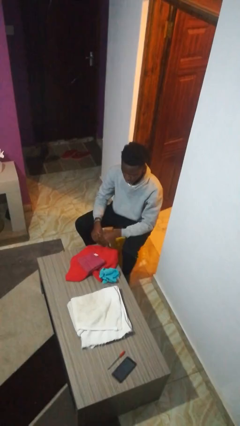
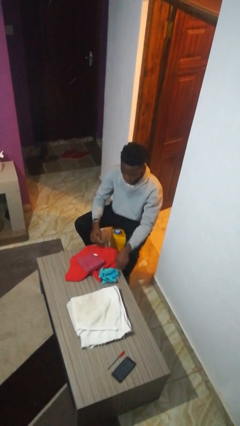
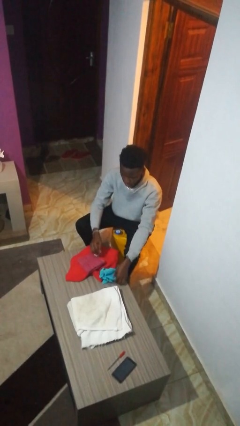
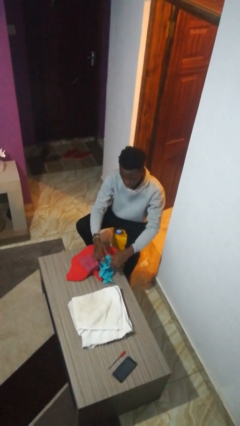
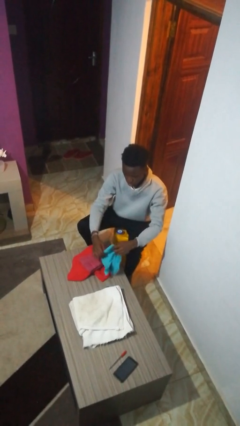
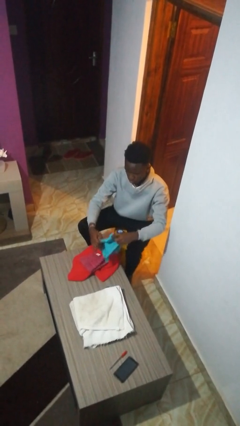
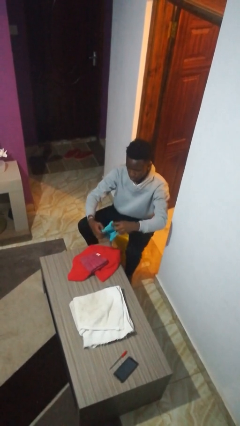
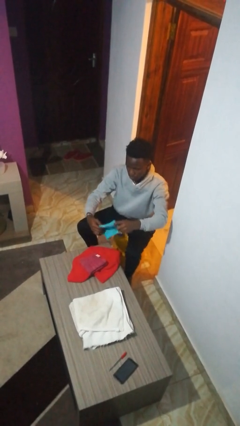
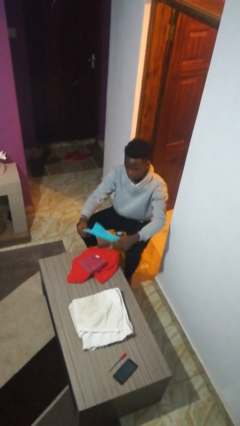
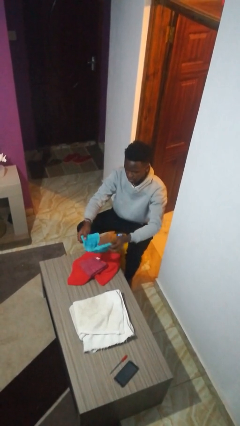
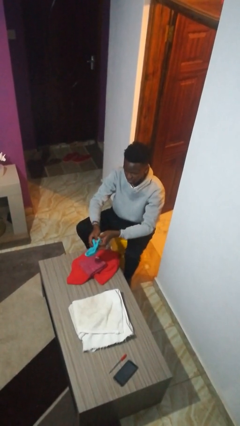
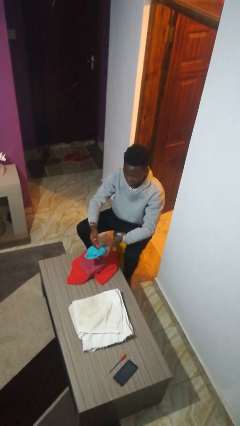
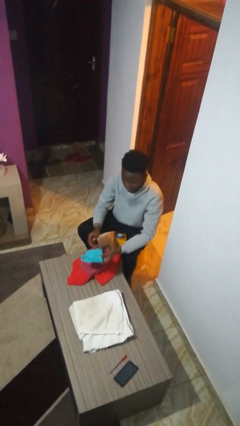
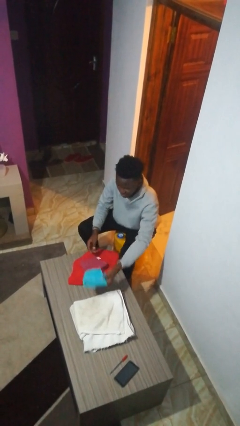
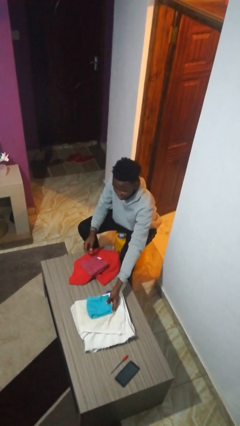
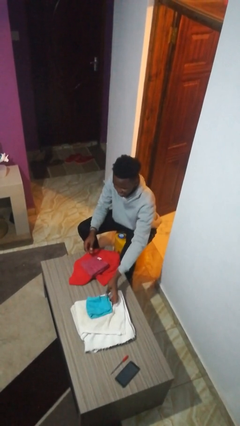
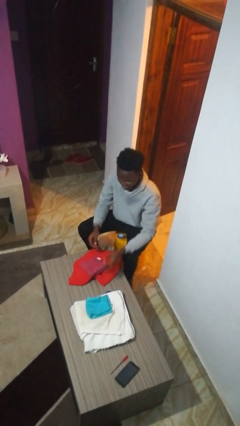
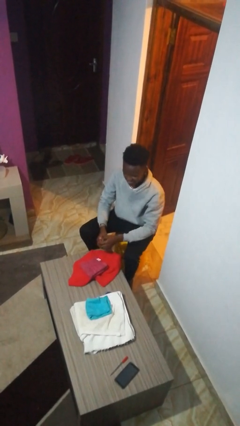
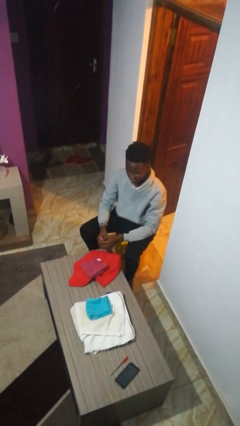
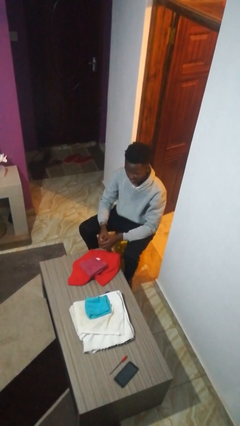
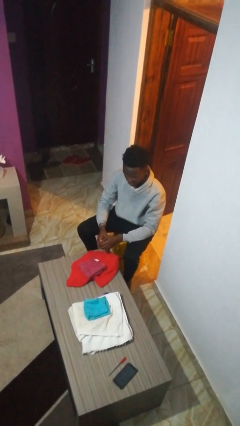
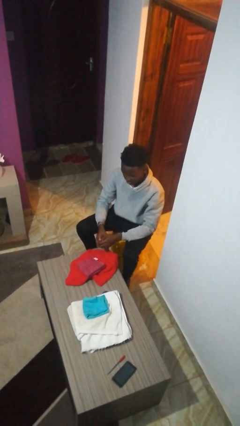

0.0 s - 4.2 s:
person folds towel

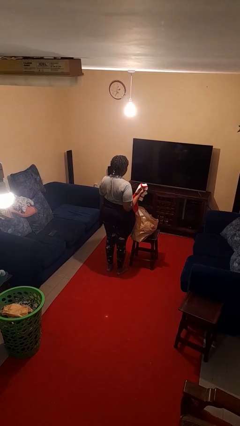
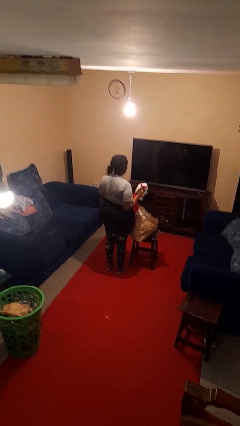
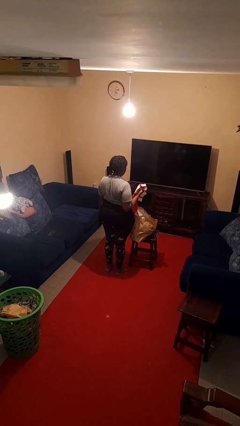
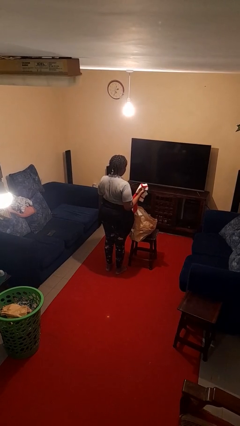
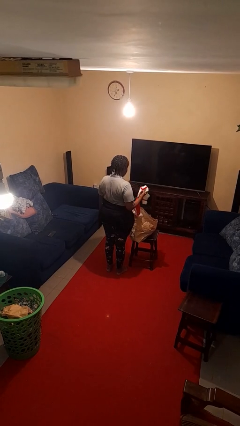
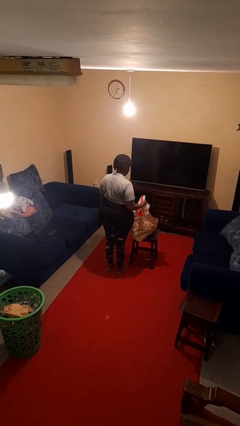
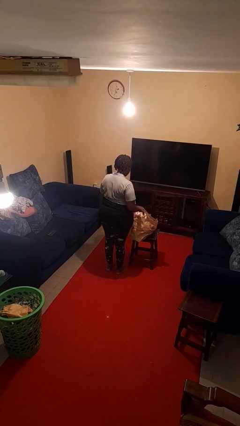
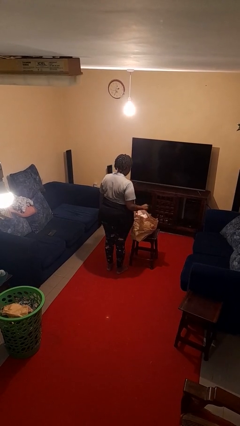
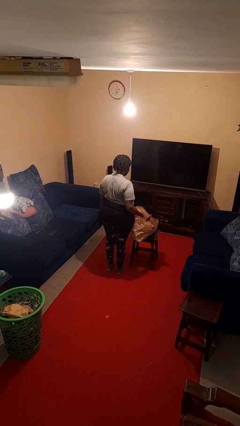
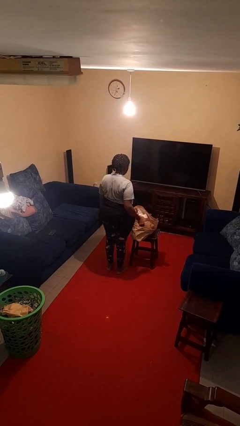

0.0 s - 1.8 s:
person puts object into bag

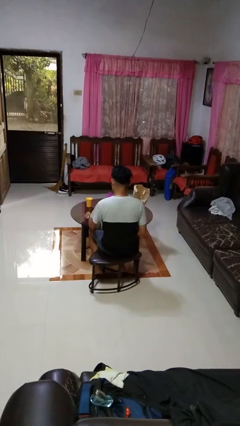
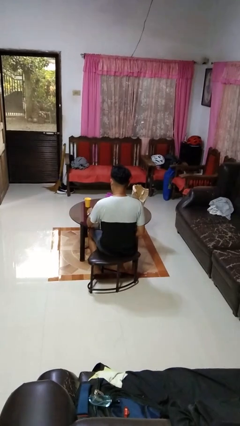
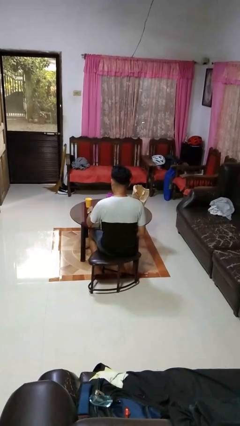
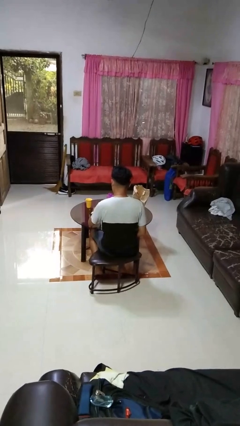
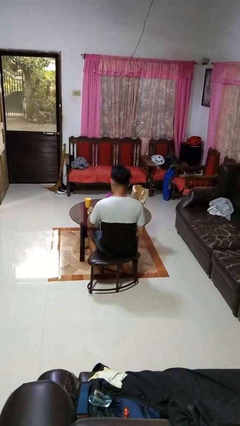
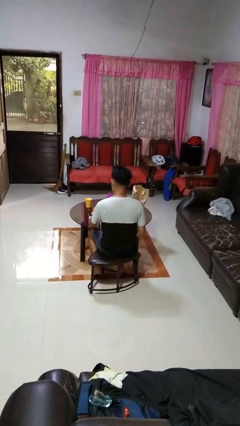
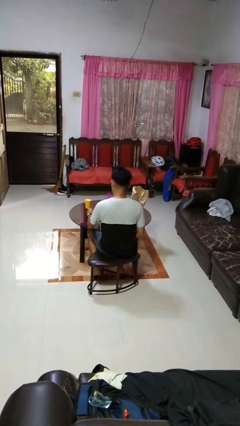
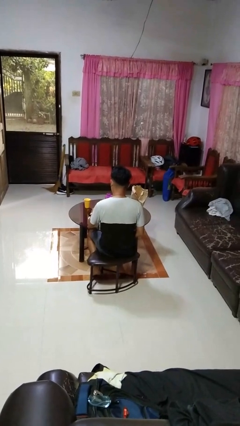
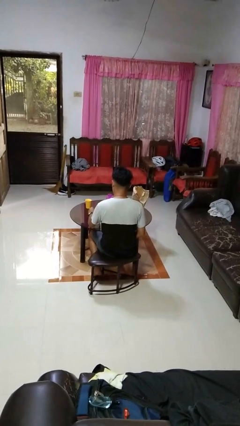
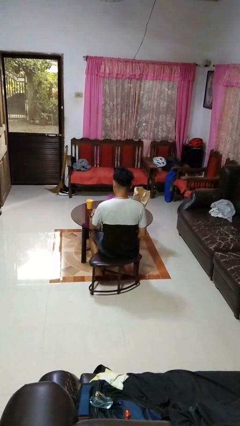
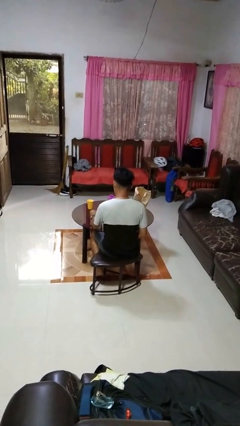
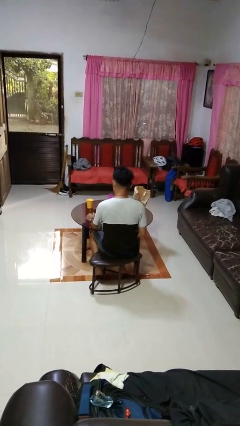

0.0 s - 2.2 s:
person stirs mug

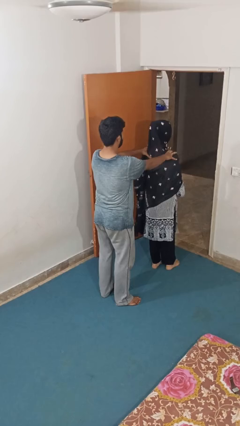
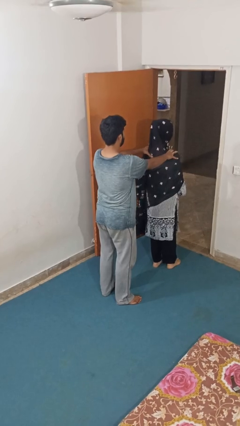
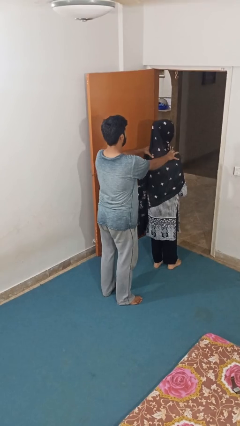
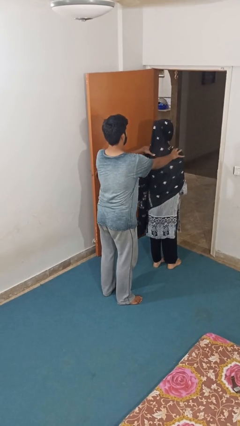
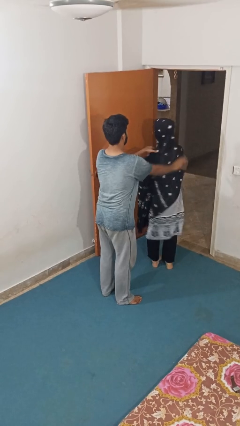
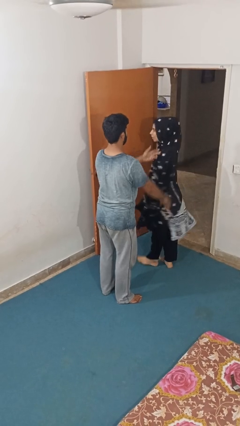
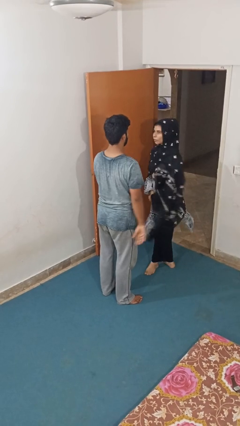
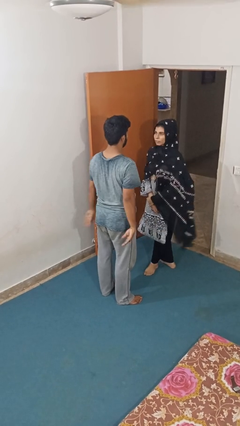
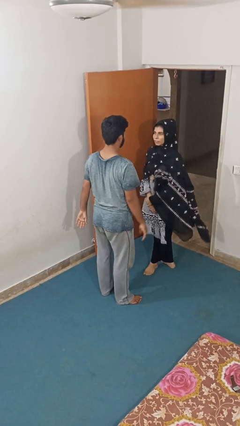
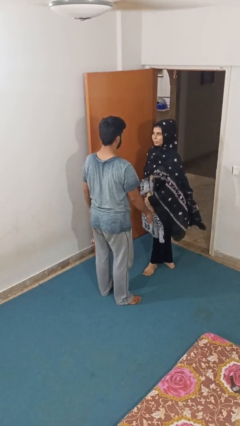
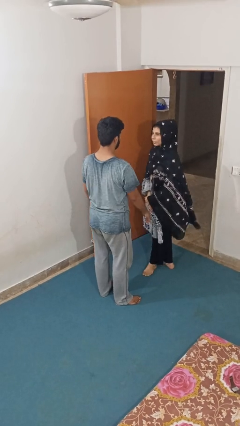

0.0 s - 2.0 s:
person spins person around

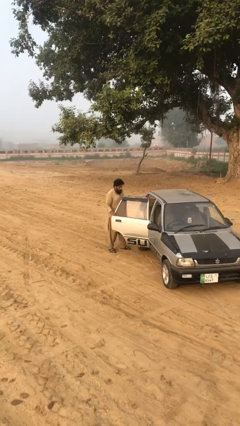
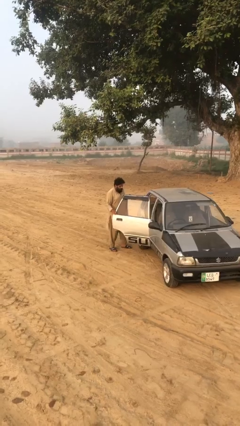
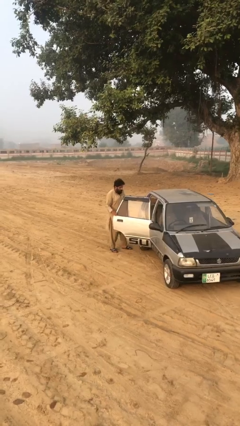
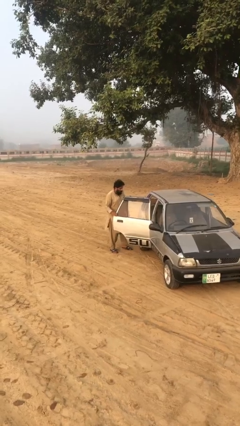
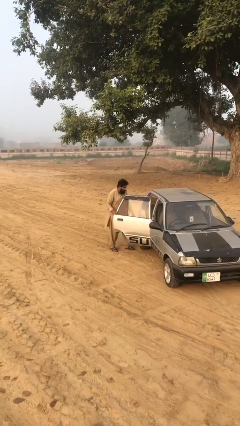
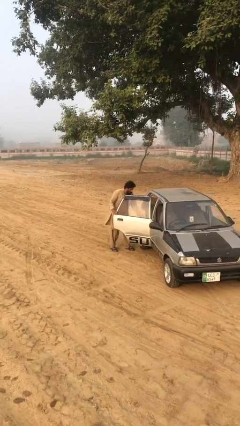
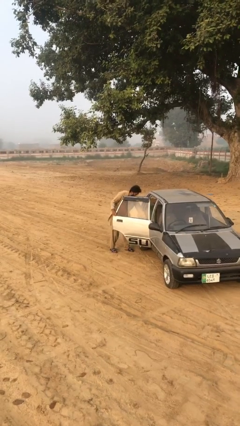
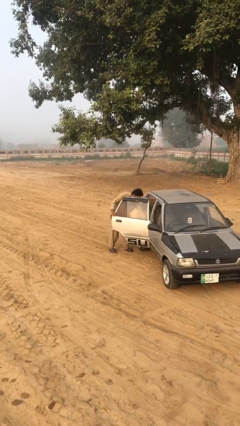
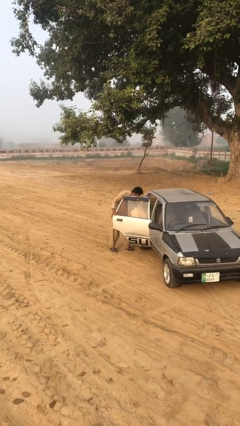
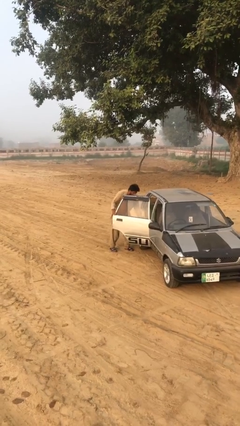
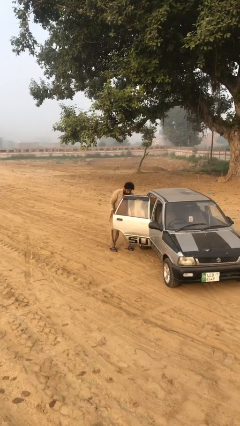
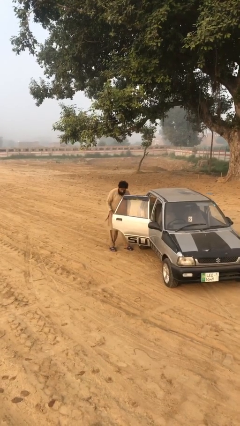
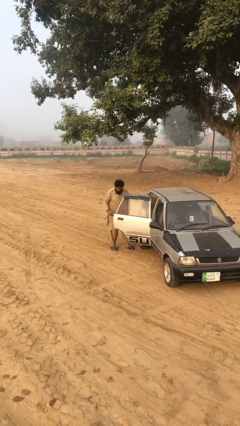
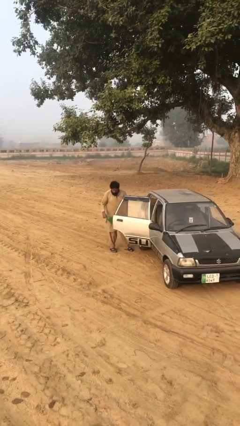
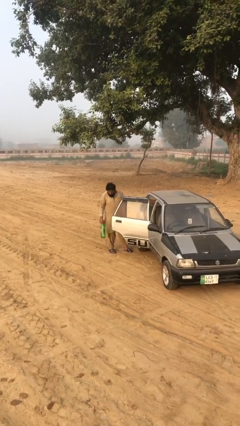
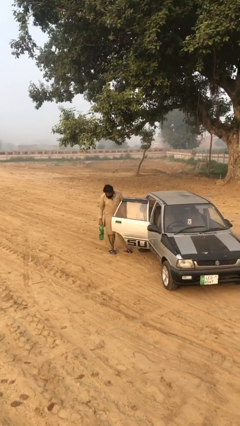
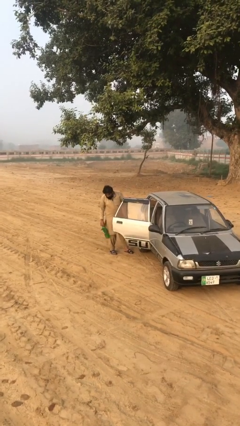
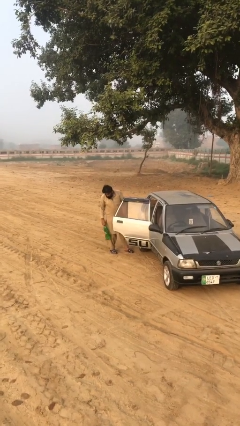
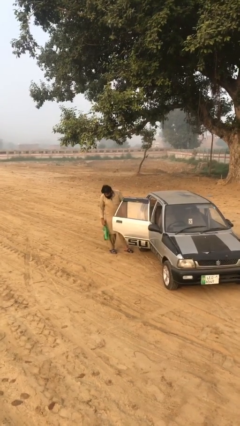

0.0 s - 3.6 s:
person unloads car

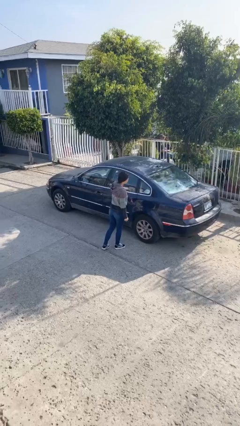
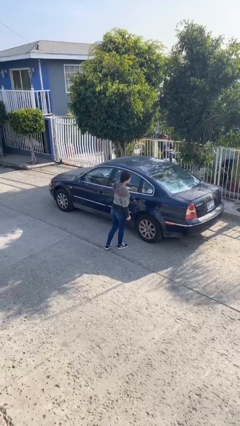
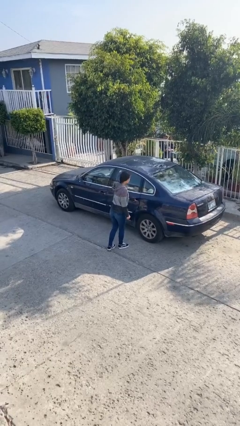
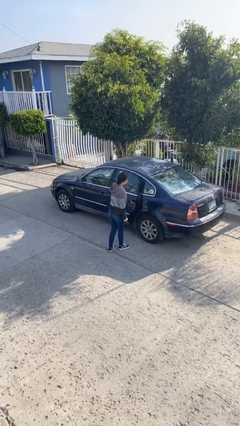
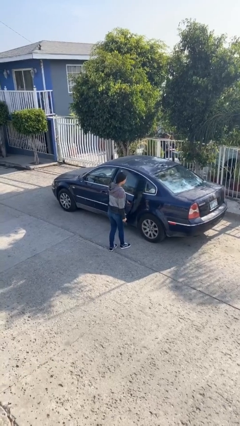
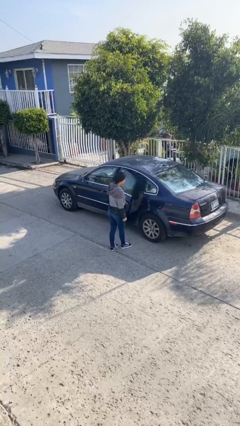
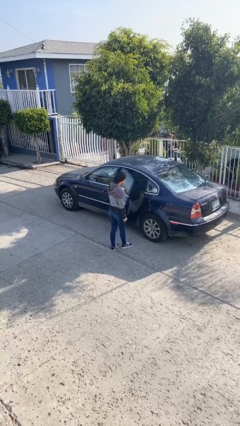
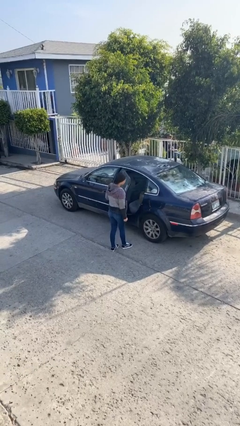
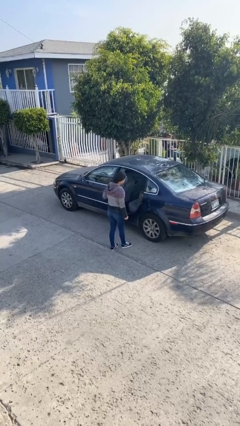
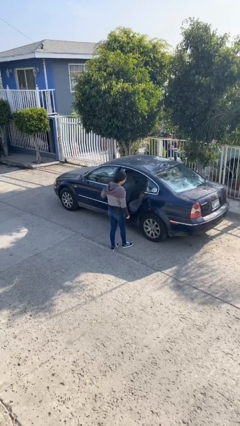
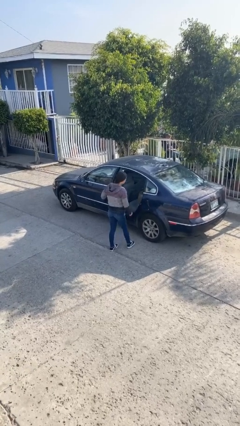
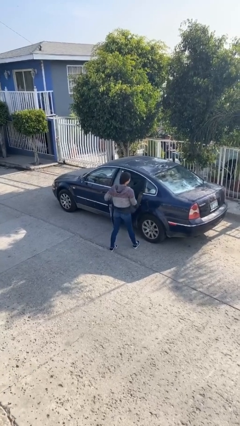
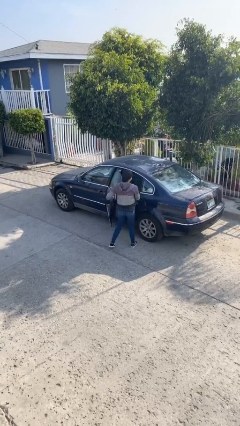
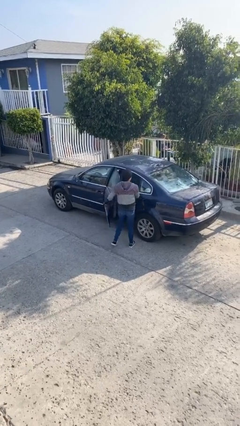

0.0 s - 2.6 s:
person opens car door

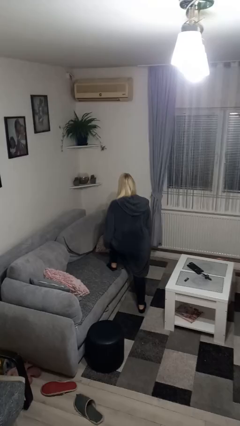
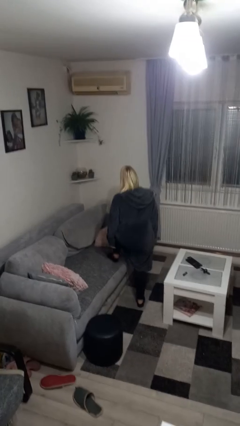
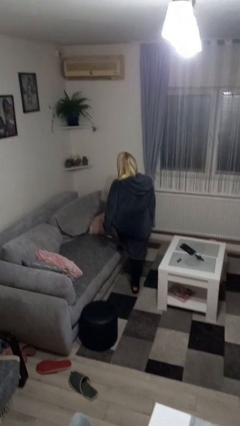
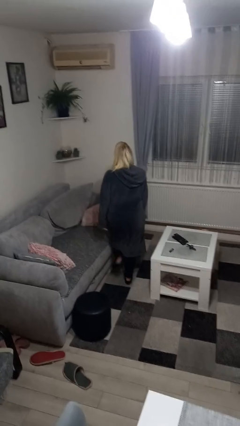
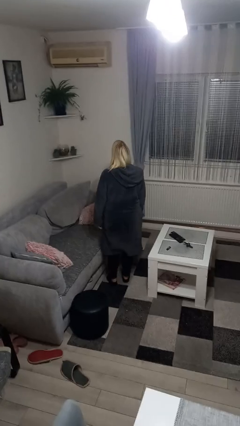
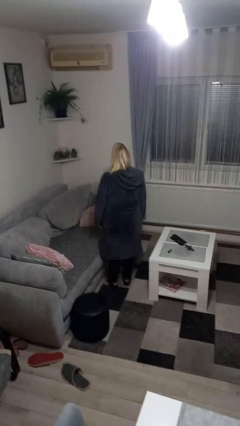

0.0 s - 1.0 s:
person climbs off couch
